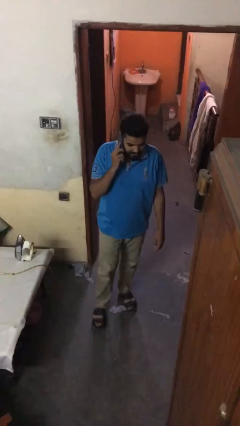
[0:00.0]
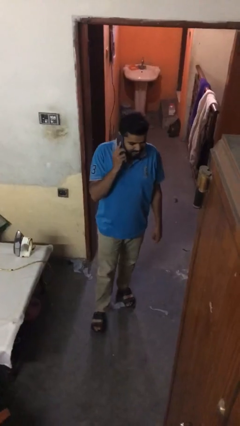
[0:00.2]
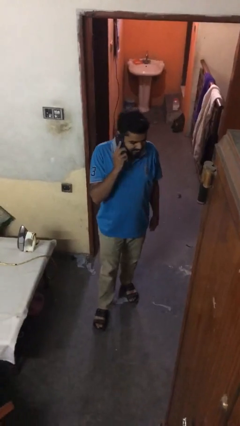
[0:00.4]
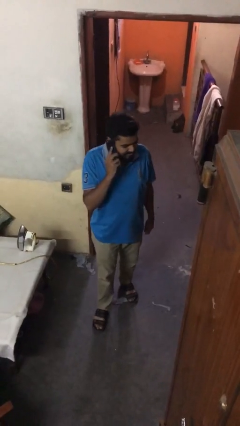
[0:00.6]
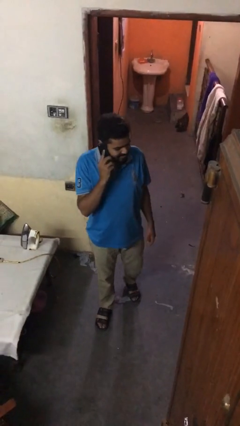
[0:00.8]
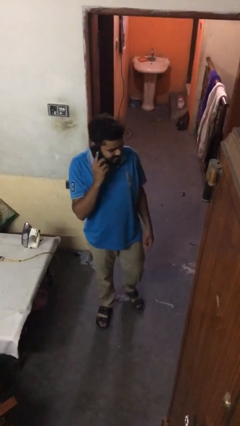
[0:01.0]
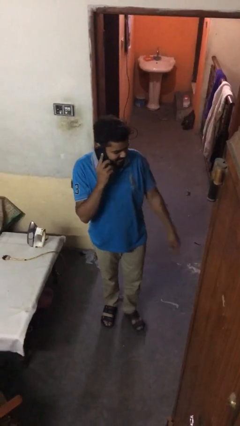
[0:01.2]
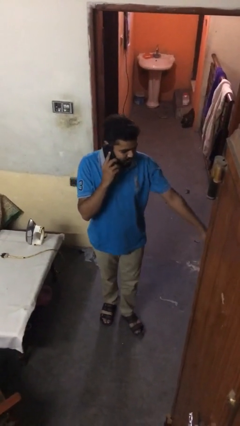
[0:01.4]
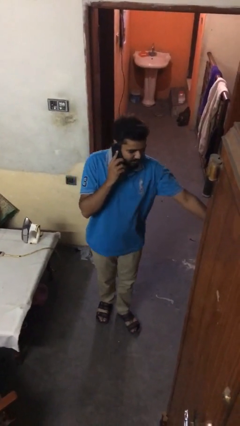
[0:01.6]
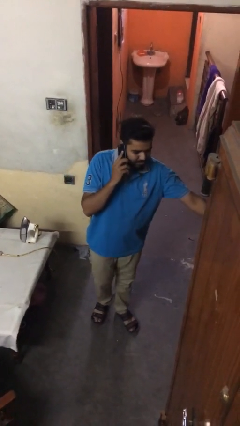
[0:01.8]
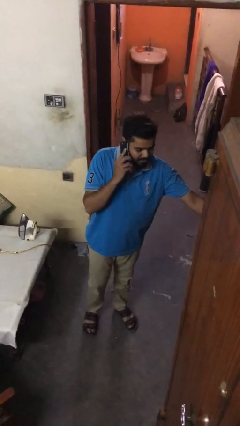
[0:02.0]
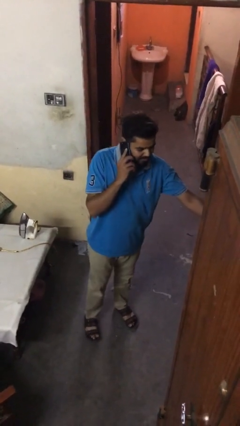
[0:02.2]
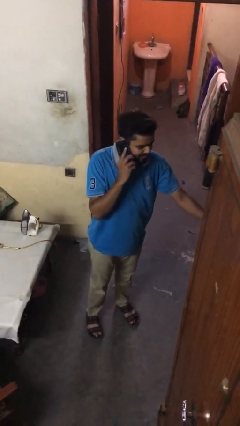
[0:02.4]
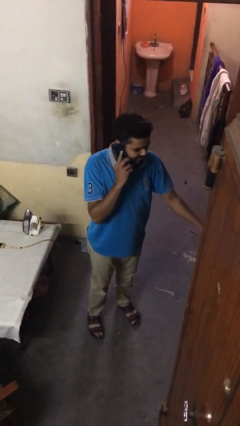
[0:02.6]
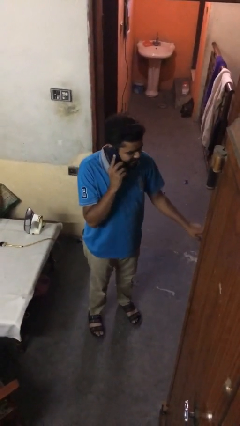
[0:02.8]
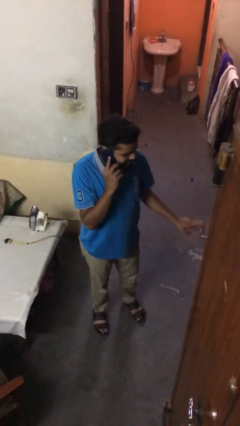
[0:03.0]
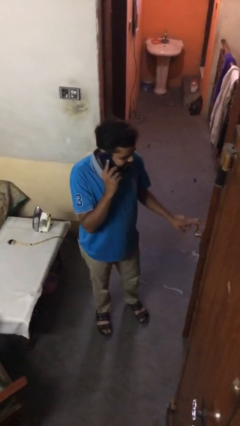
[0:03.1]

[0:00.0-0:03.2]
person enters scene through structure

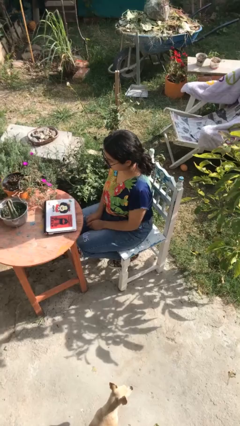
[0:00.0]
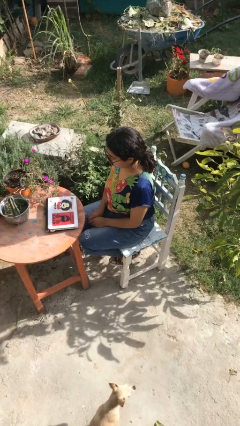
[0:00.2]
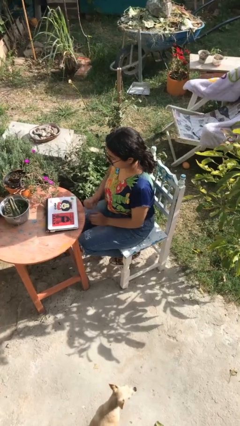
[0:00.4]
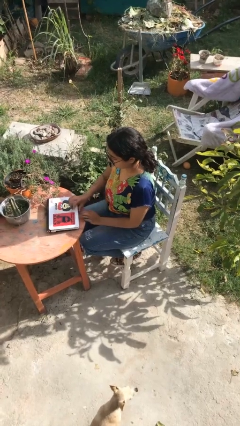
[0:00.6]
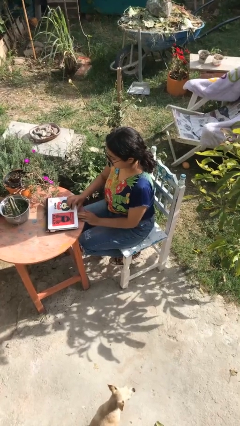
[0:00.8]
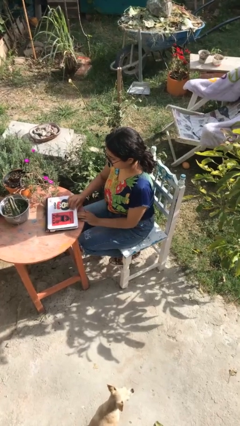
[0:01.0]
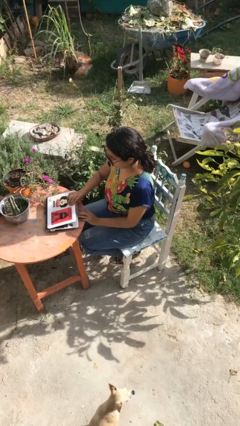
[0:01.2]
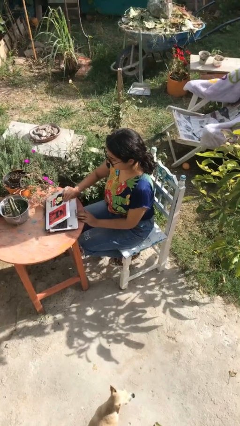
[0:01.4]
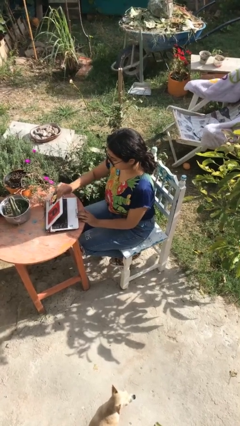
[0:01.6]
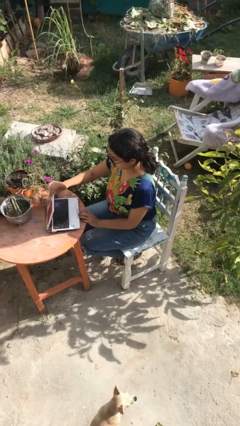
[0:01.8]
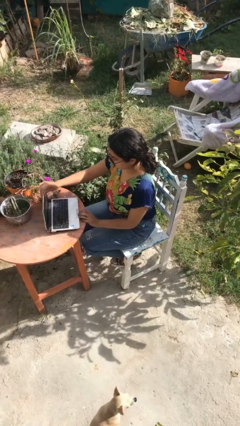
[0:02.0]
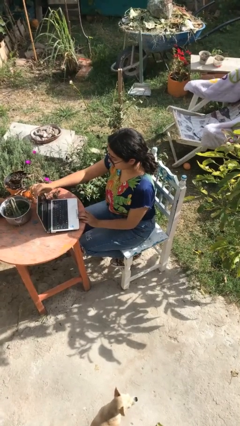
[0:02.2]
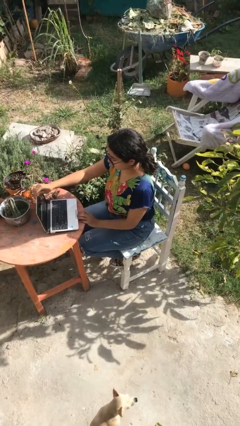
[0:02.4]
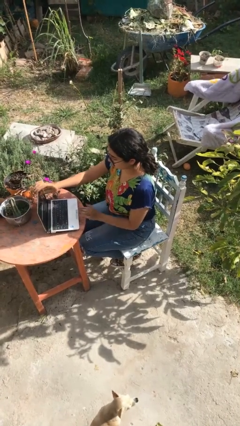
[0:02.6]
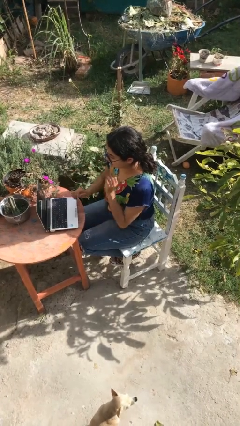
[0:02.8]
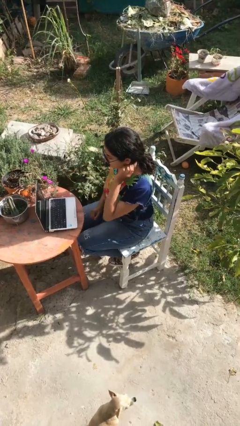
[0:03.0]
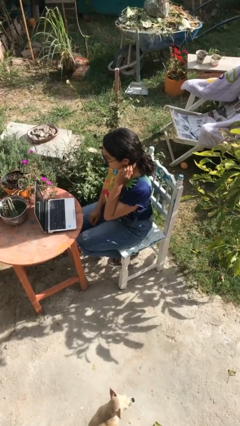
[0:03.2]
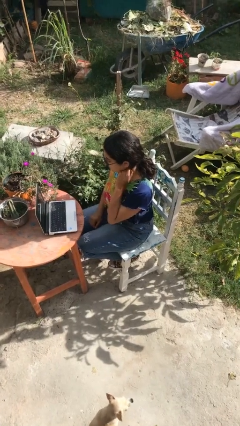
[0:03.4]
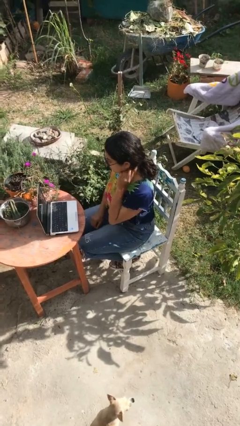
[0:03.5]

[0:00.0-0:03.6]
person opens laptop

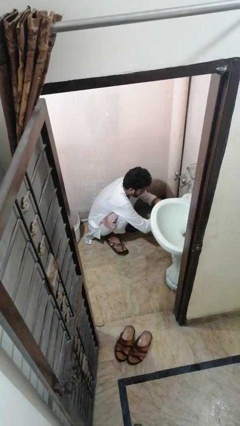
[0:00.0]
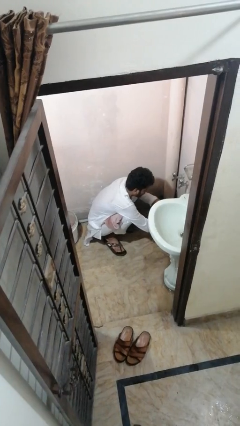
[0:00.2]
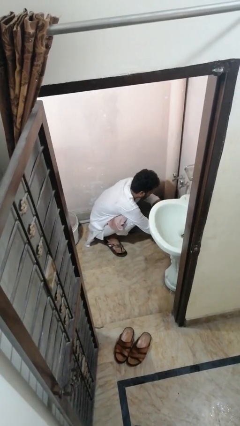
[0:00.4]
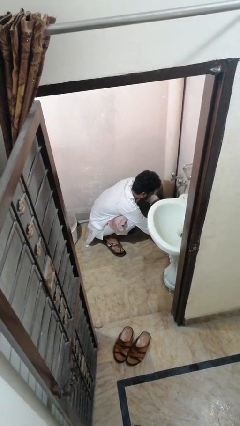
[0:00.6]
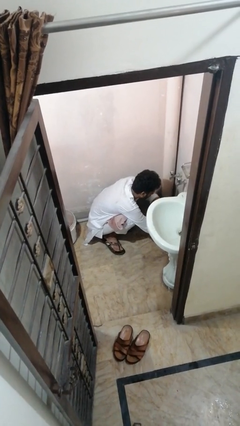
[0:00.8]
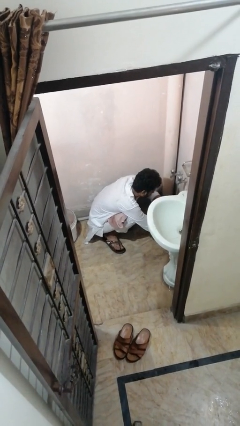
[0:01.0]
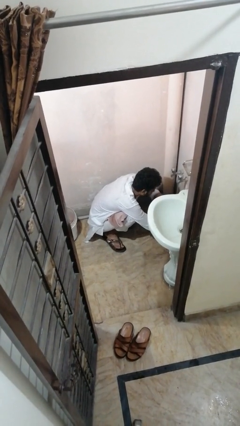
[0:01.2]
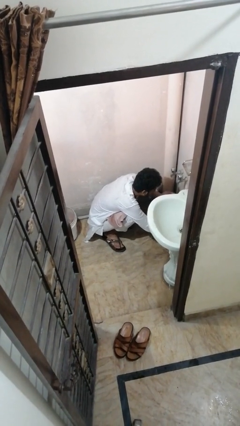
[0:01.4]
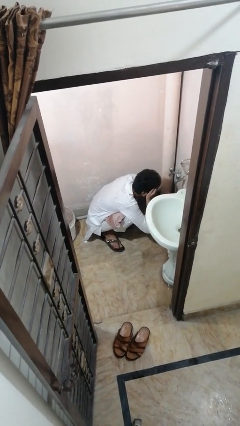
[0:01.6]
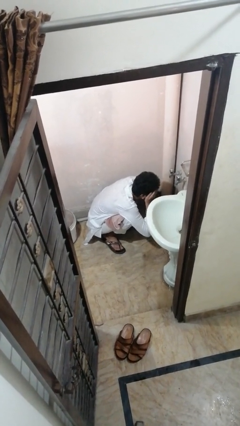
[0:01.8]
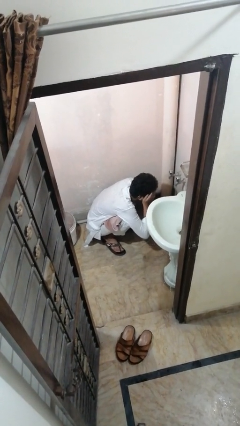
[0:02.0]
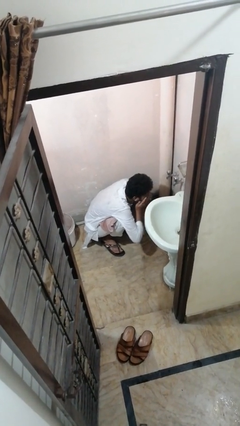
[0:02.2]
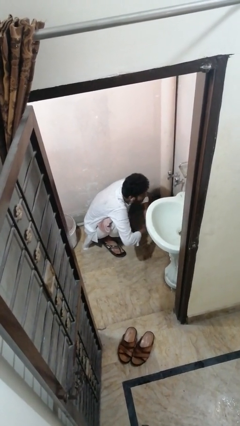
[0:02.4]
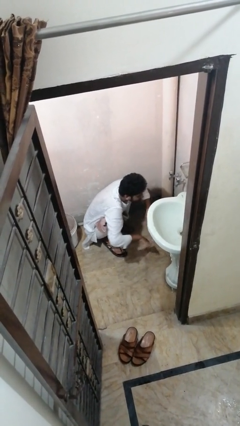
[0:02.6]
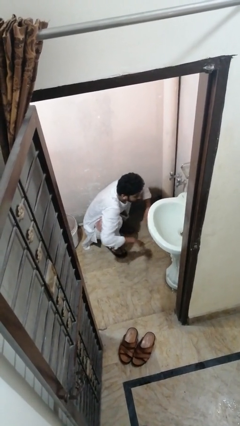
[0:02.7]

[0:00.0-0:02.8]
person washes face

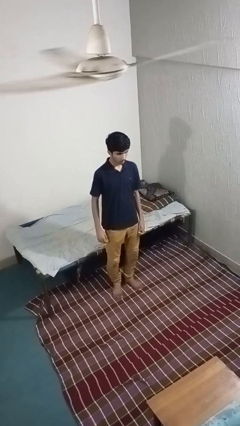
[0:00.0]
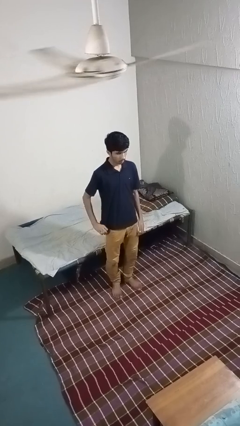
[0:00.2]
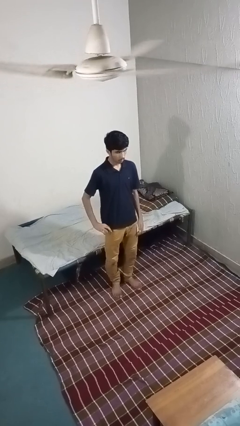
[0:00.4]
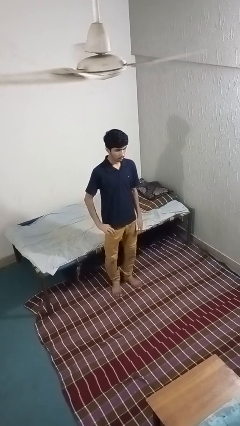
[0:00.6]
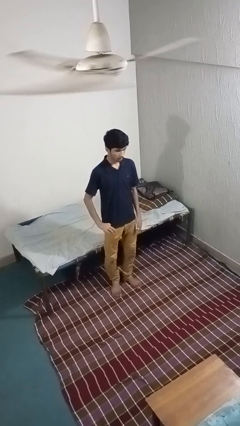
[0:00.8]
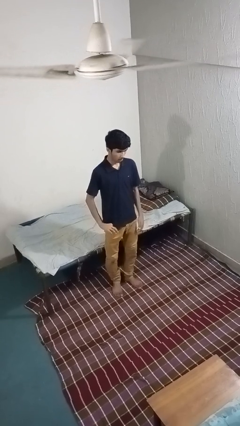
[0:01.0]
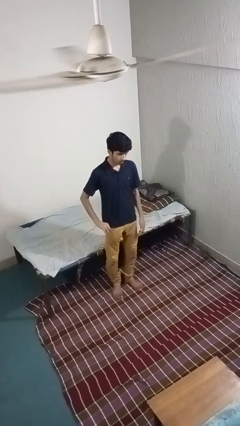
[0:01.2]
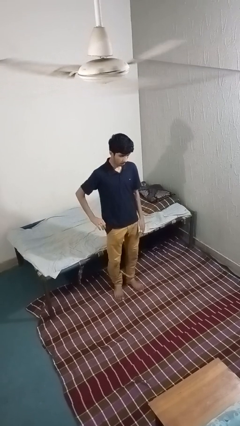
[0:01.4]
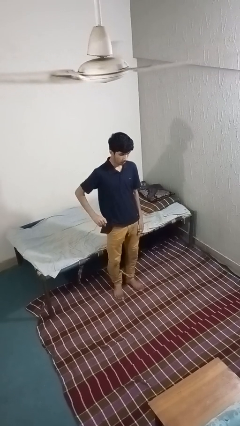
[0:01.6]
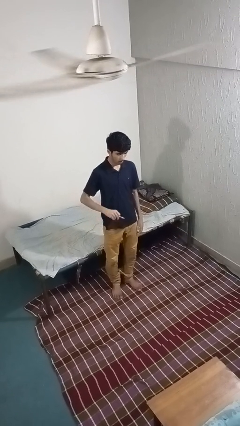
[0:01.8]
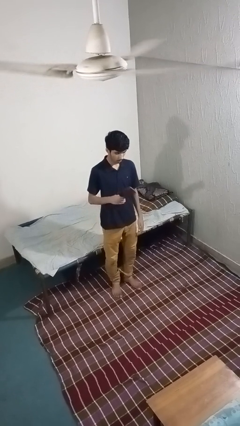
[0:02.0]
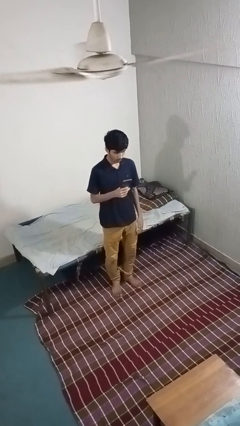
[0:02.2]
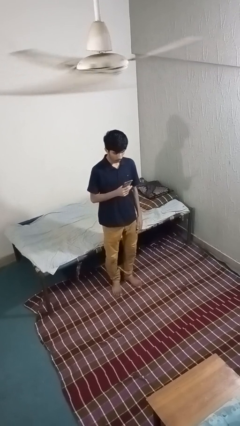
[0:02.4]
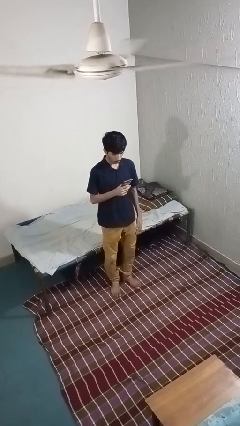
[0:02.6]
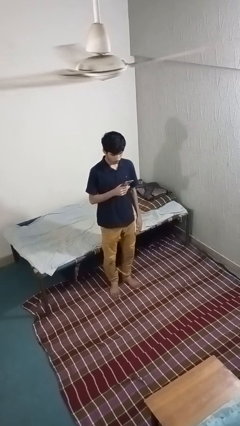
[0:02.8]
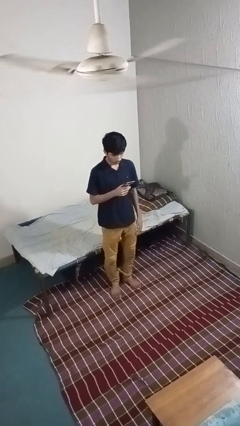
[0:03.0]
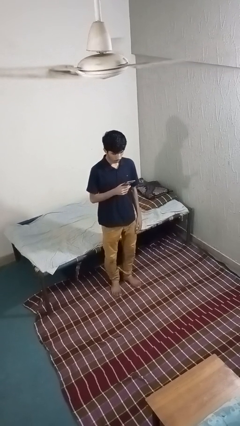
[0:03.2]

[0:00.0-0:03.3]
person takes phone from pocket

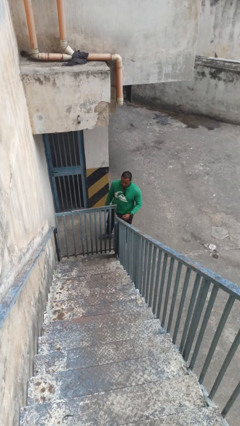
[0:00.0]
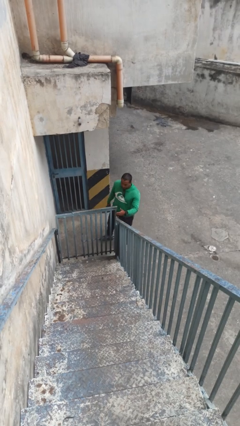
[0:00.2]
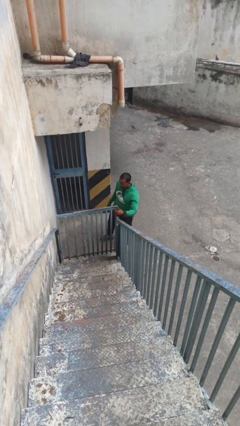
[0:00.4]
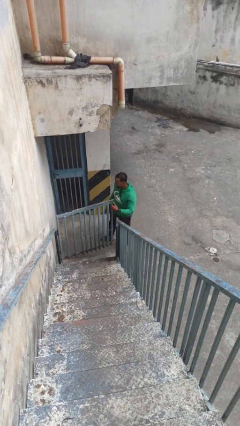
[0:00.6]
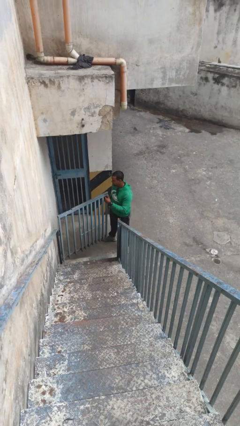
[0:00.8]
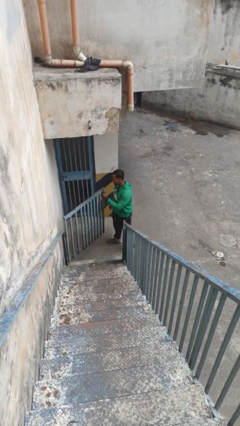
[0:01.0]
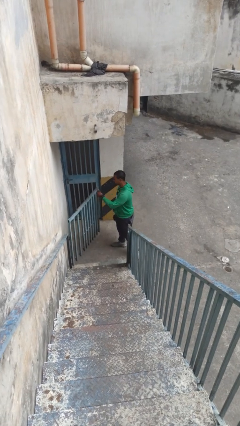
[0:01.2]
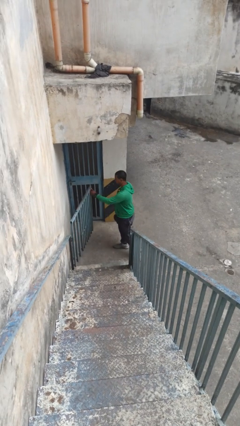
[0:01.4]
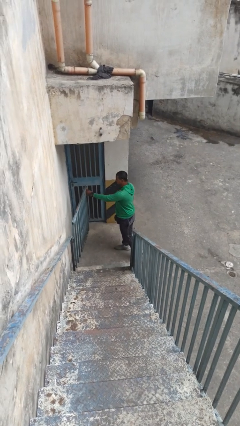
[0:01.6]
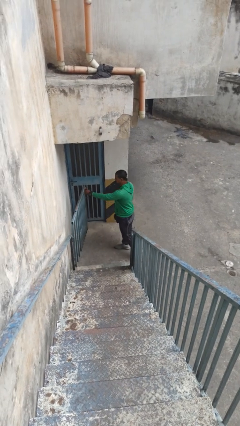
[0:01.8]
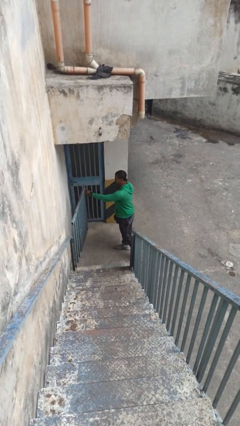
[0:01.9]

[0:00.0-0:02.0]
person opens facility door

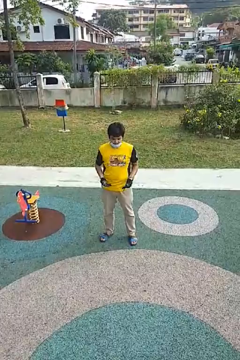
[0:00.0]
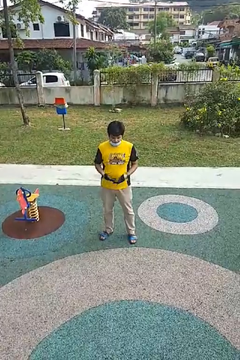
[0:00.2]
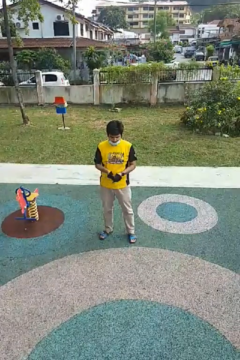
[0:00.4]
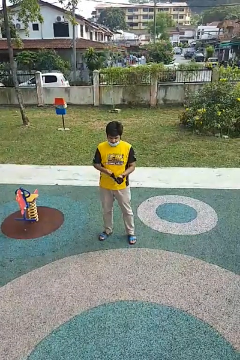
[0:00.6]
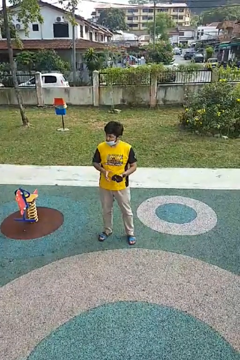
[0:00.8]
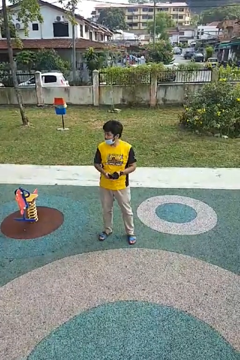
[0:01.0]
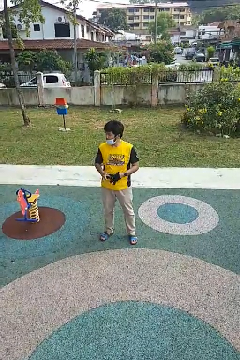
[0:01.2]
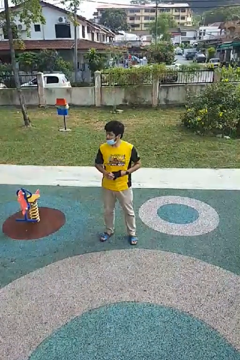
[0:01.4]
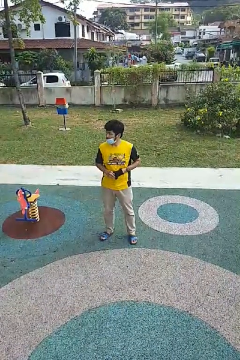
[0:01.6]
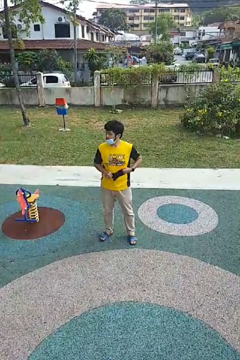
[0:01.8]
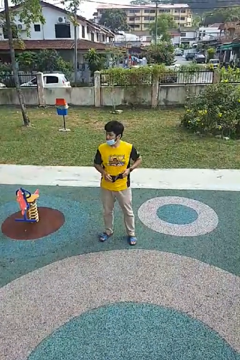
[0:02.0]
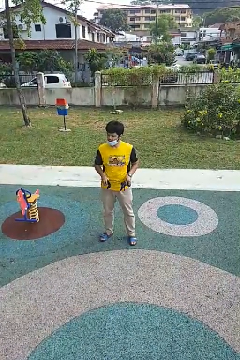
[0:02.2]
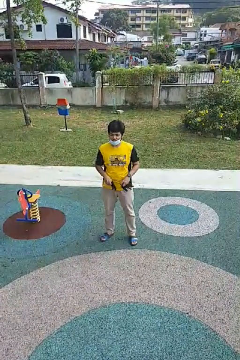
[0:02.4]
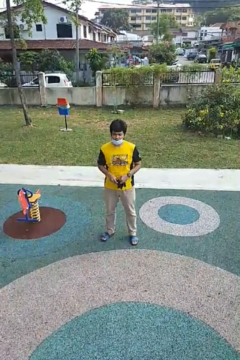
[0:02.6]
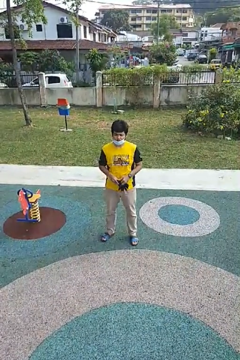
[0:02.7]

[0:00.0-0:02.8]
person takes off gloves

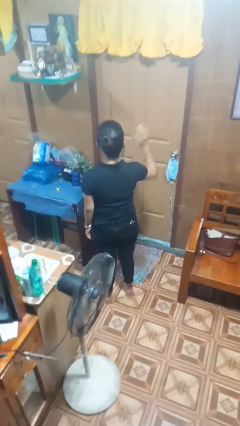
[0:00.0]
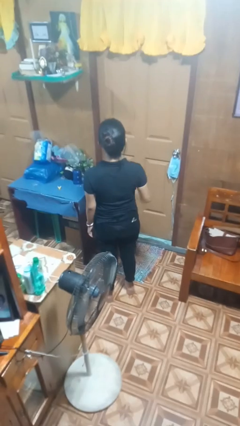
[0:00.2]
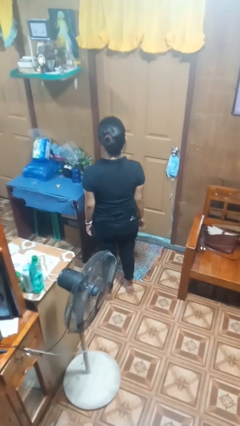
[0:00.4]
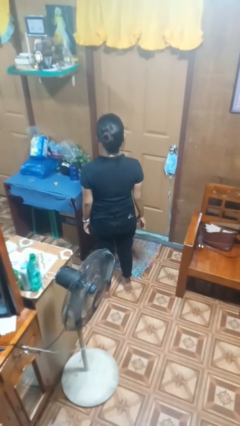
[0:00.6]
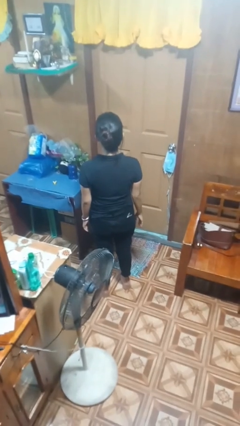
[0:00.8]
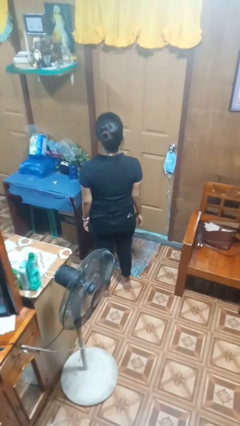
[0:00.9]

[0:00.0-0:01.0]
person gestures lower hand
